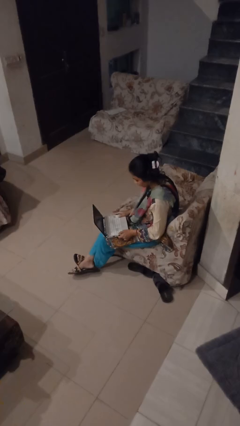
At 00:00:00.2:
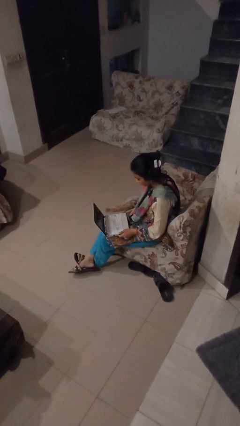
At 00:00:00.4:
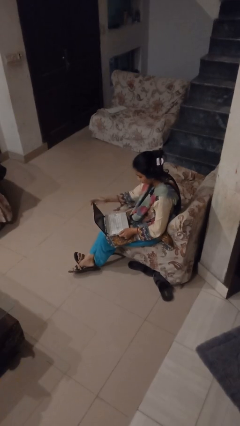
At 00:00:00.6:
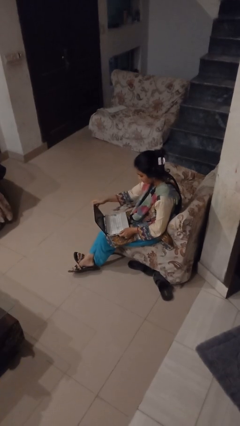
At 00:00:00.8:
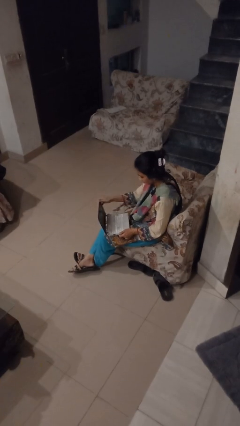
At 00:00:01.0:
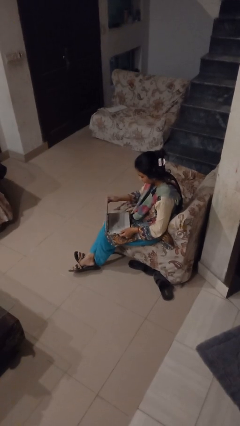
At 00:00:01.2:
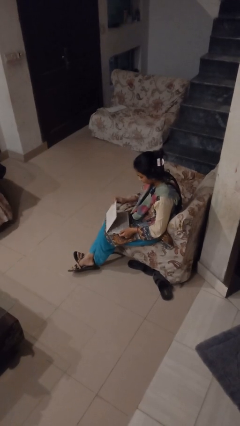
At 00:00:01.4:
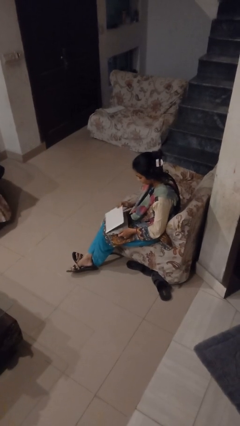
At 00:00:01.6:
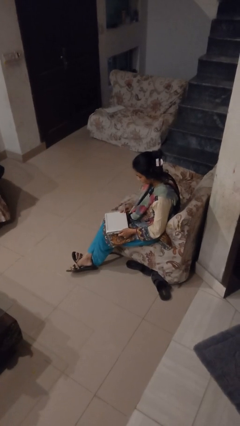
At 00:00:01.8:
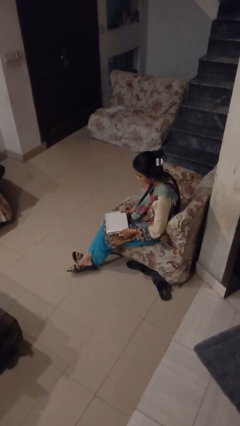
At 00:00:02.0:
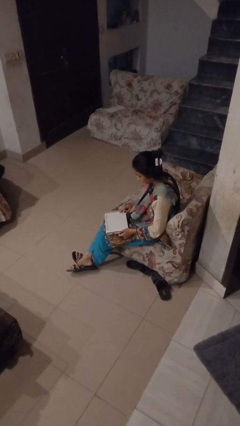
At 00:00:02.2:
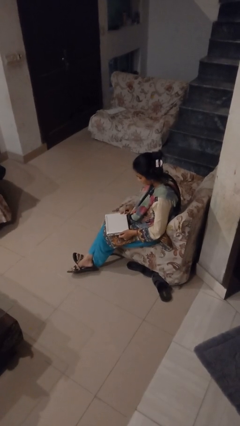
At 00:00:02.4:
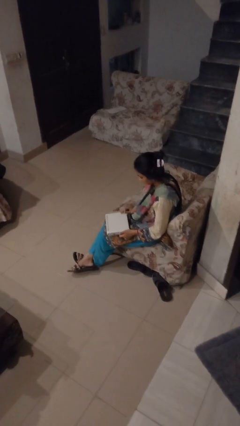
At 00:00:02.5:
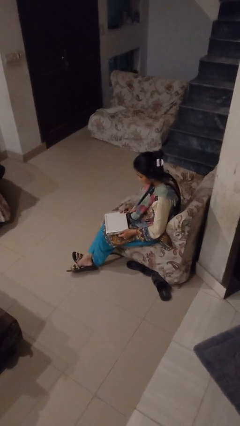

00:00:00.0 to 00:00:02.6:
person closes laptop

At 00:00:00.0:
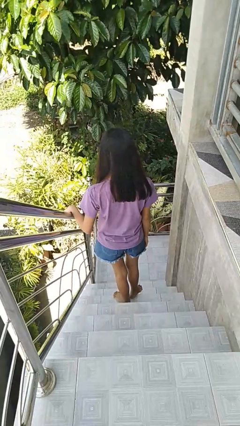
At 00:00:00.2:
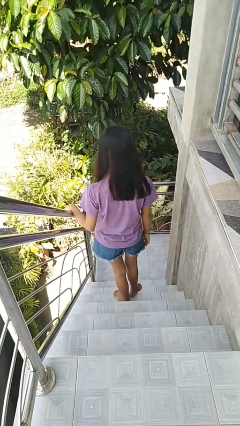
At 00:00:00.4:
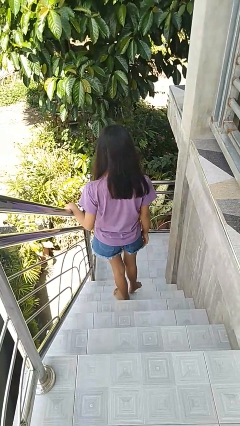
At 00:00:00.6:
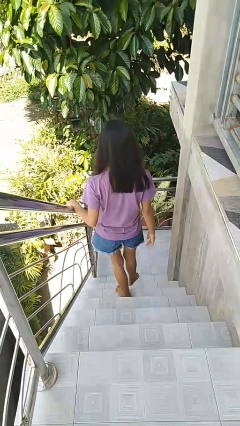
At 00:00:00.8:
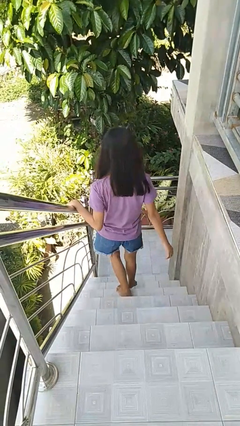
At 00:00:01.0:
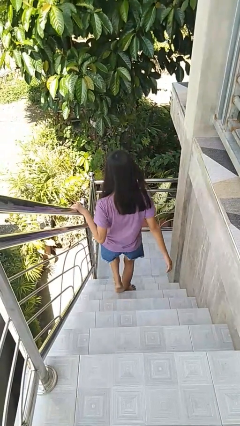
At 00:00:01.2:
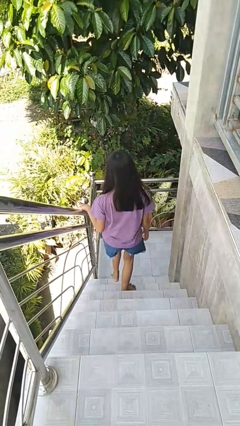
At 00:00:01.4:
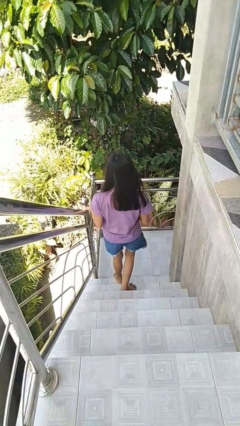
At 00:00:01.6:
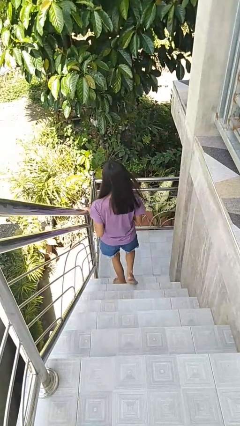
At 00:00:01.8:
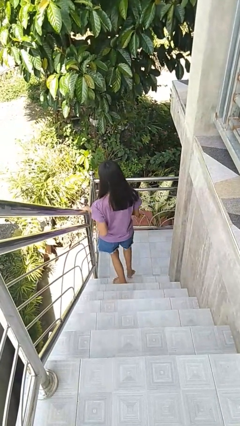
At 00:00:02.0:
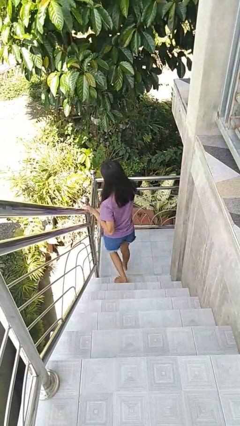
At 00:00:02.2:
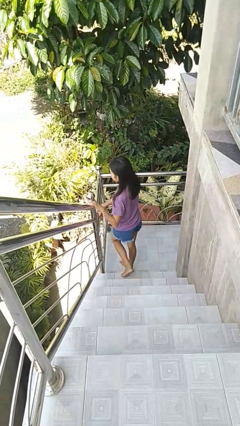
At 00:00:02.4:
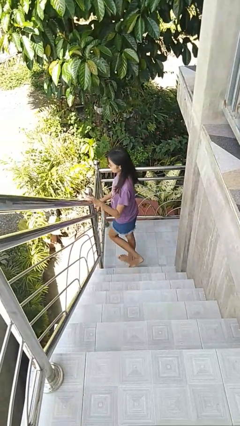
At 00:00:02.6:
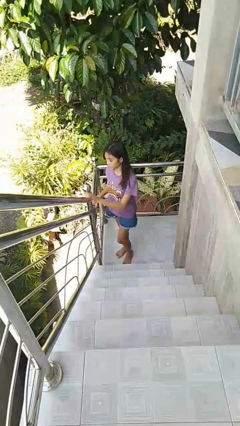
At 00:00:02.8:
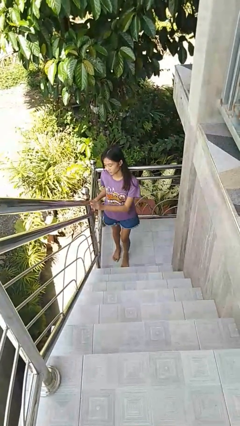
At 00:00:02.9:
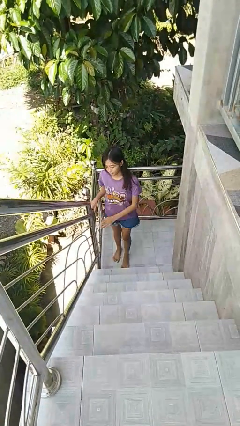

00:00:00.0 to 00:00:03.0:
person climbs down stairs

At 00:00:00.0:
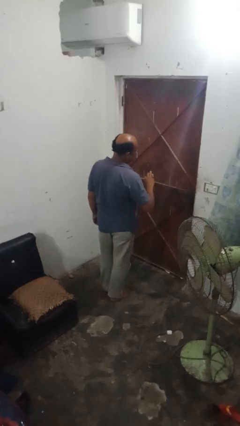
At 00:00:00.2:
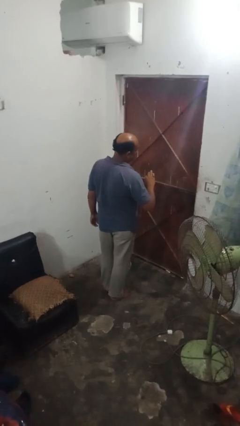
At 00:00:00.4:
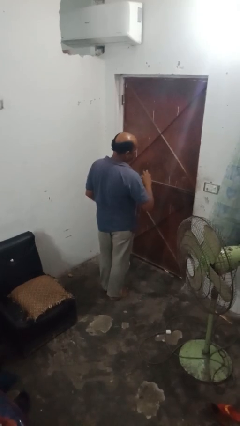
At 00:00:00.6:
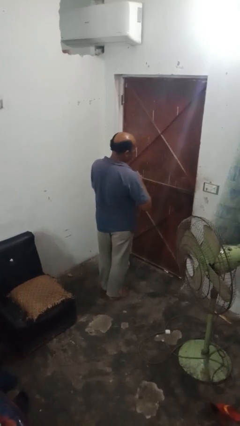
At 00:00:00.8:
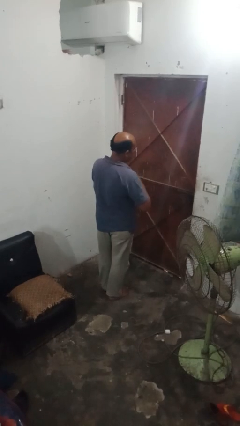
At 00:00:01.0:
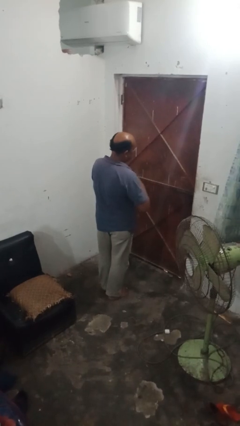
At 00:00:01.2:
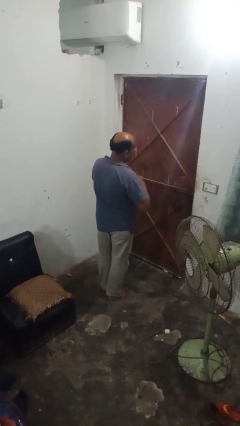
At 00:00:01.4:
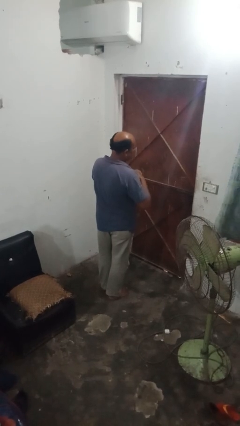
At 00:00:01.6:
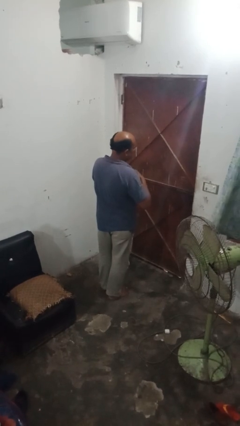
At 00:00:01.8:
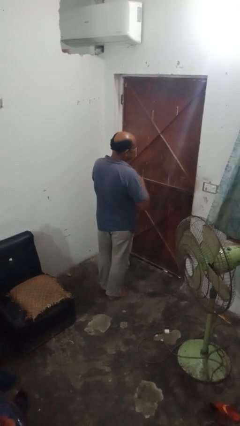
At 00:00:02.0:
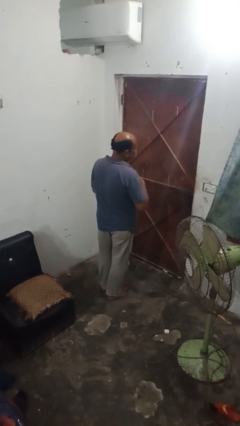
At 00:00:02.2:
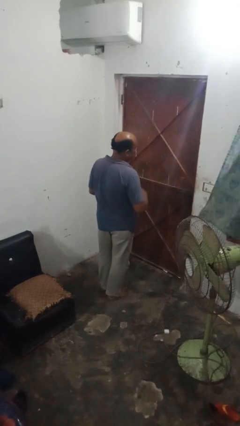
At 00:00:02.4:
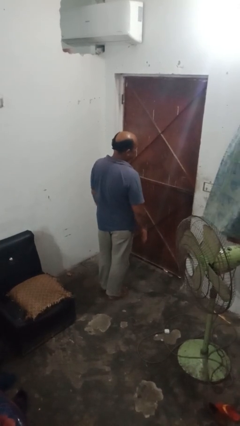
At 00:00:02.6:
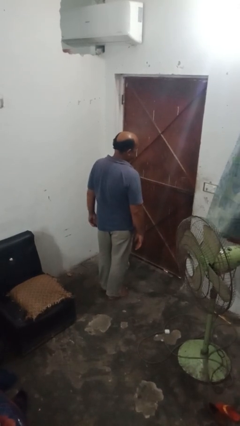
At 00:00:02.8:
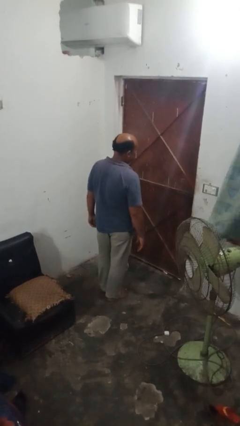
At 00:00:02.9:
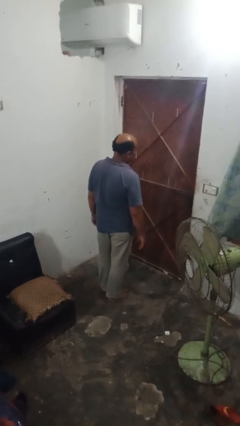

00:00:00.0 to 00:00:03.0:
person takes off ring

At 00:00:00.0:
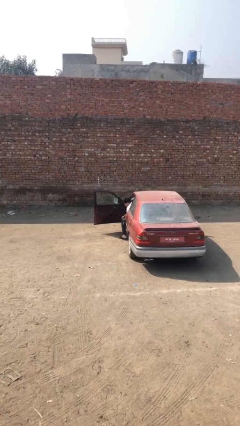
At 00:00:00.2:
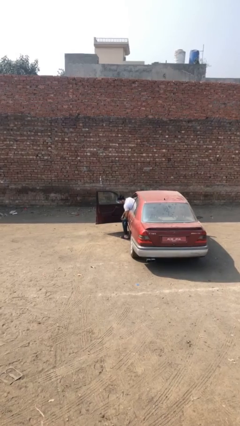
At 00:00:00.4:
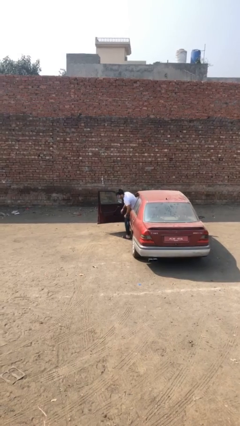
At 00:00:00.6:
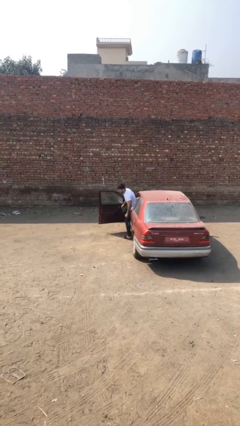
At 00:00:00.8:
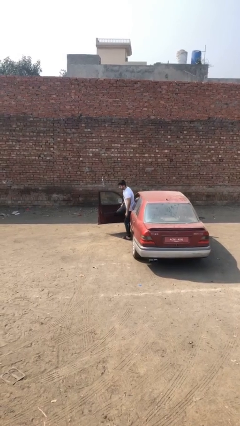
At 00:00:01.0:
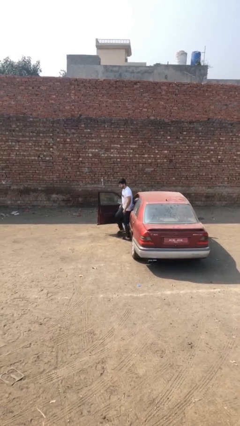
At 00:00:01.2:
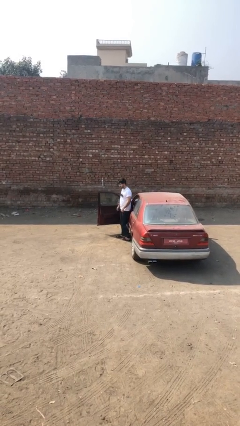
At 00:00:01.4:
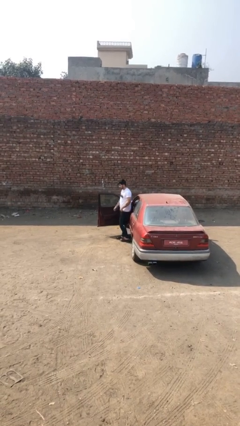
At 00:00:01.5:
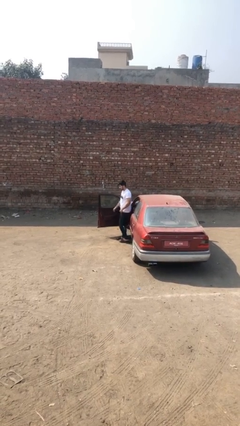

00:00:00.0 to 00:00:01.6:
person exits car

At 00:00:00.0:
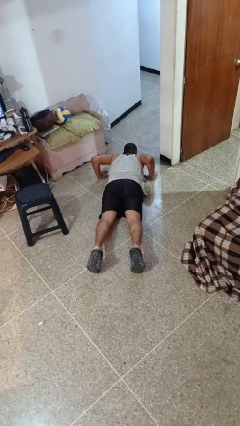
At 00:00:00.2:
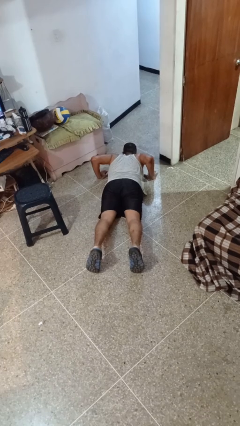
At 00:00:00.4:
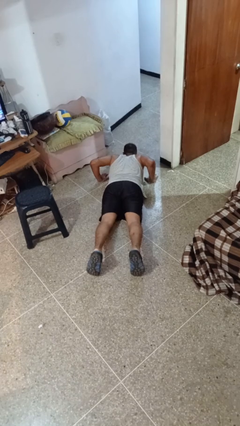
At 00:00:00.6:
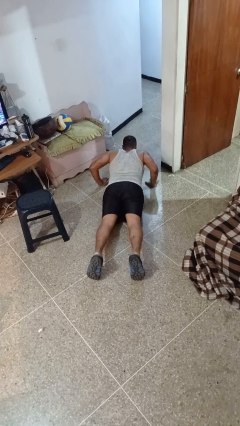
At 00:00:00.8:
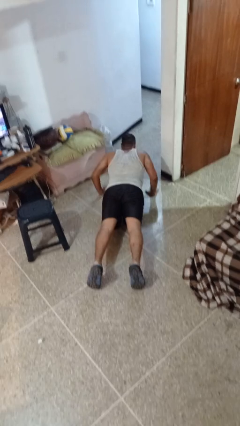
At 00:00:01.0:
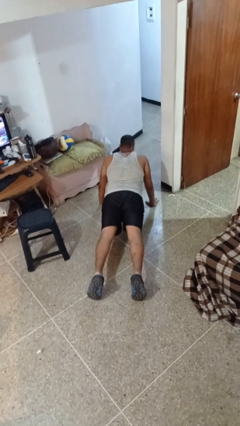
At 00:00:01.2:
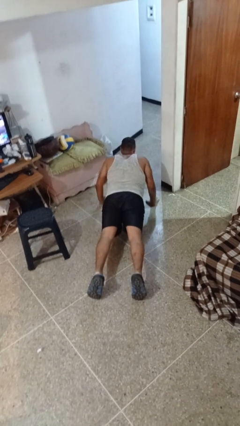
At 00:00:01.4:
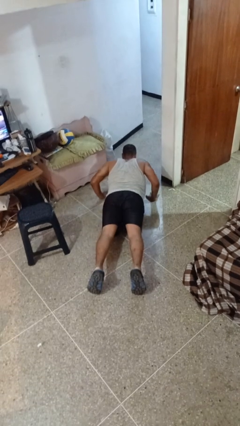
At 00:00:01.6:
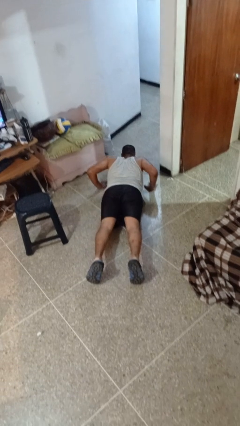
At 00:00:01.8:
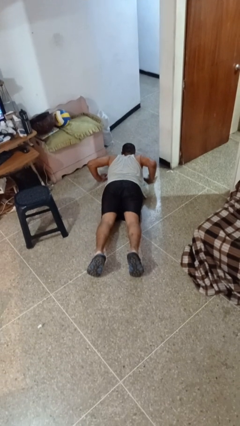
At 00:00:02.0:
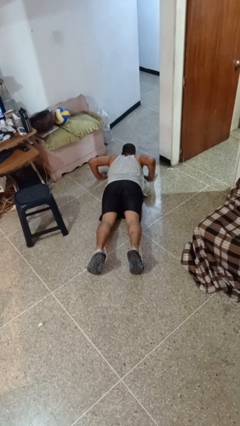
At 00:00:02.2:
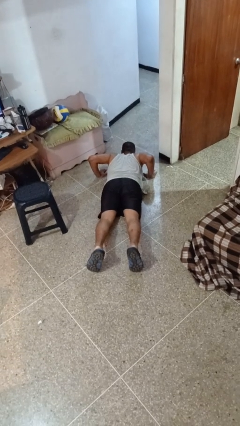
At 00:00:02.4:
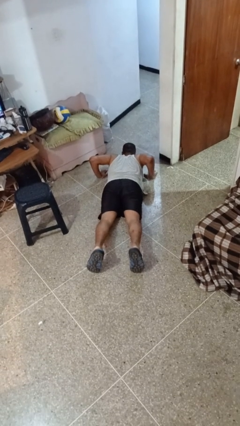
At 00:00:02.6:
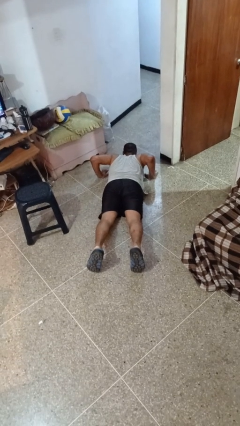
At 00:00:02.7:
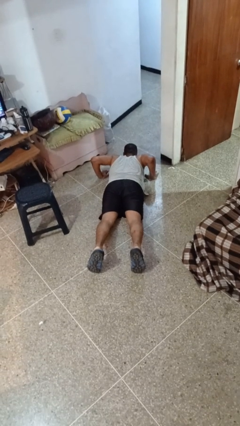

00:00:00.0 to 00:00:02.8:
person exercises with pushup

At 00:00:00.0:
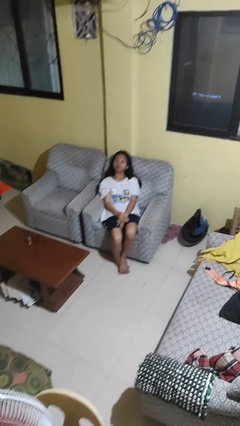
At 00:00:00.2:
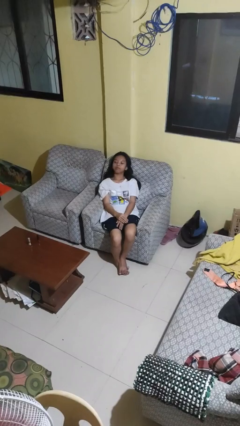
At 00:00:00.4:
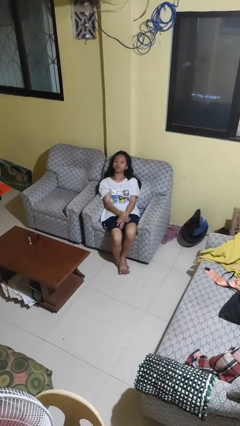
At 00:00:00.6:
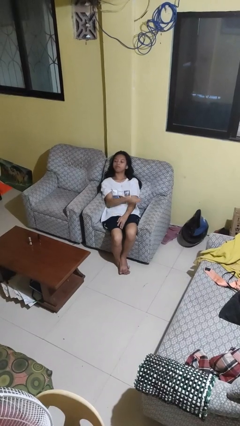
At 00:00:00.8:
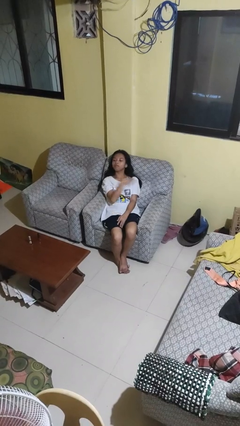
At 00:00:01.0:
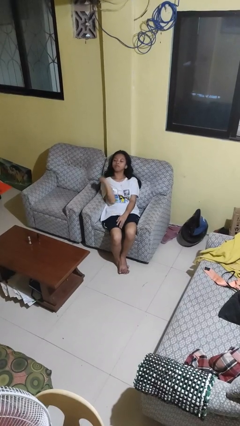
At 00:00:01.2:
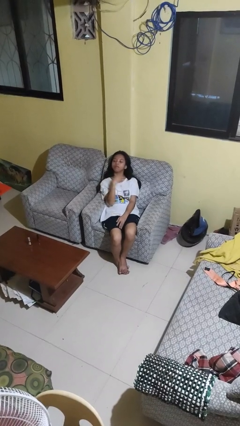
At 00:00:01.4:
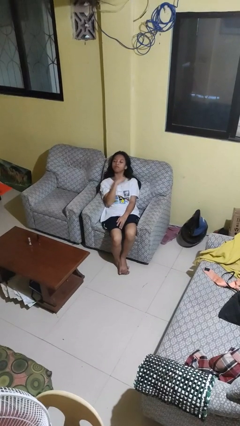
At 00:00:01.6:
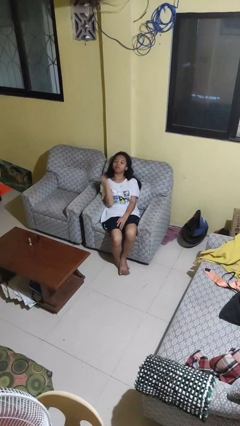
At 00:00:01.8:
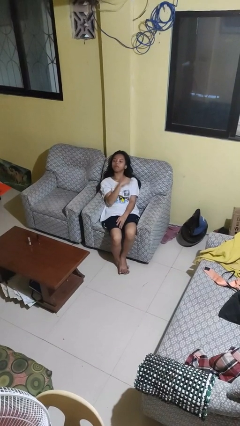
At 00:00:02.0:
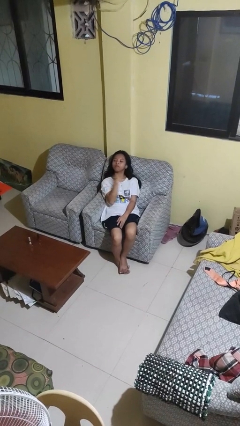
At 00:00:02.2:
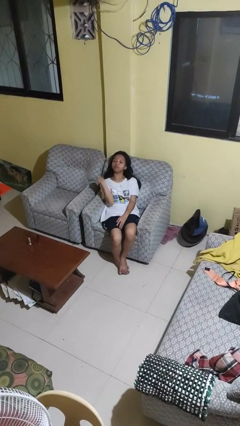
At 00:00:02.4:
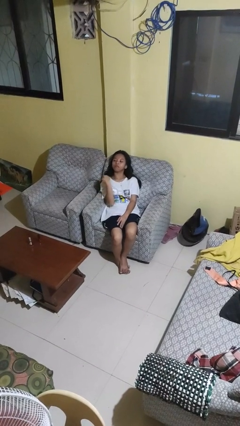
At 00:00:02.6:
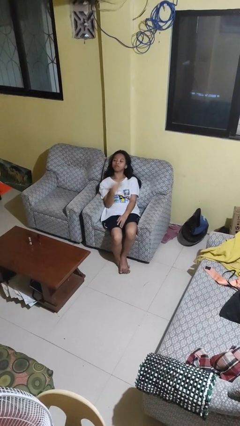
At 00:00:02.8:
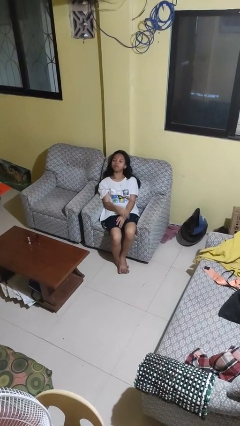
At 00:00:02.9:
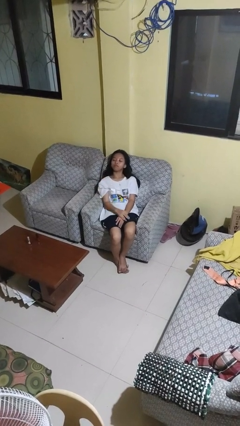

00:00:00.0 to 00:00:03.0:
person gestures cut

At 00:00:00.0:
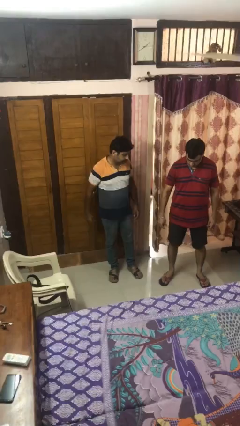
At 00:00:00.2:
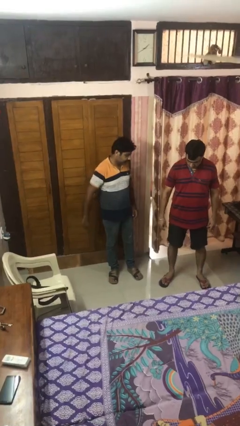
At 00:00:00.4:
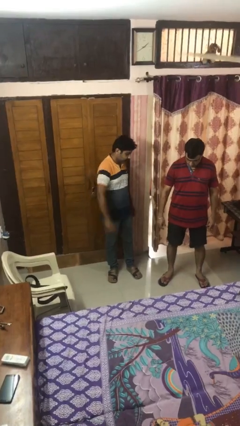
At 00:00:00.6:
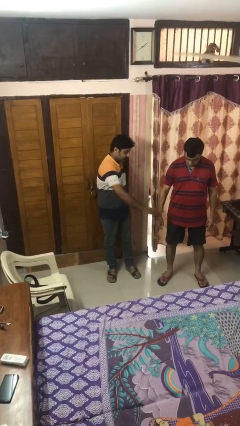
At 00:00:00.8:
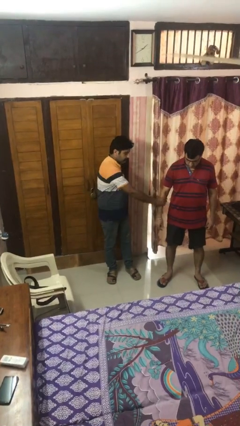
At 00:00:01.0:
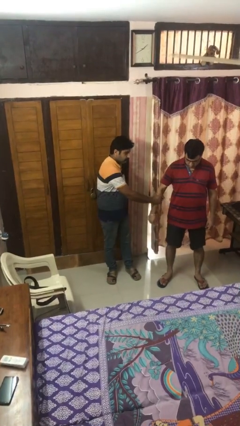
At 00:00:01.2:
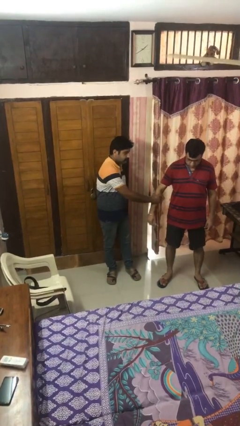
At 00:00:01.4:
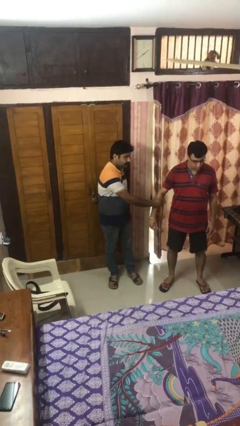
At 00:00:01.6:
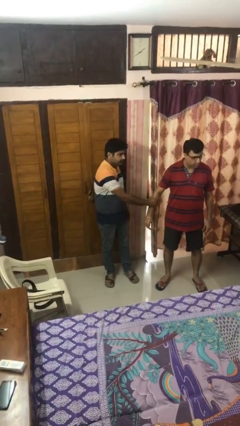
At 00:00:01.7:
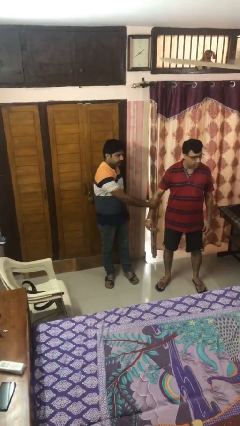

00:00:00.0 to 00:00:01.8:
person grabs person by forearm
